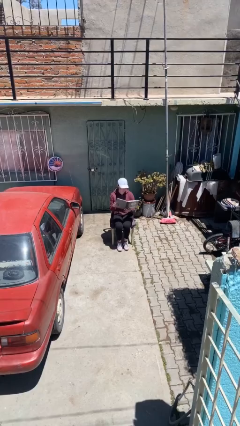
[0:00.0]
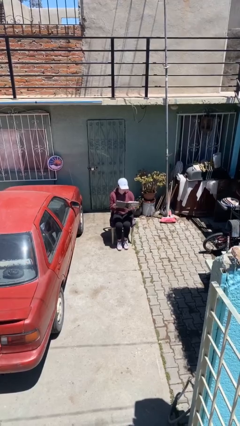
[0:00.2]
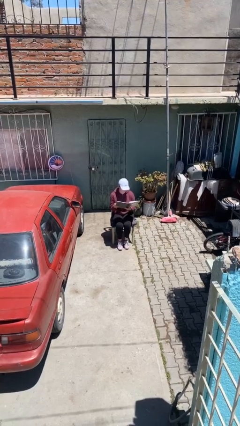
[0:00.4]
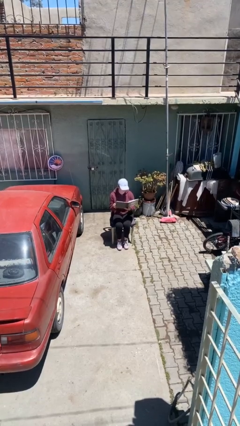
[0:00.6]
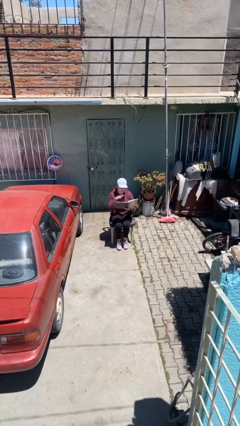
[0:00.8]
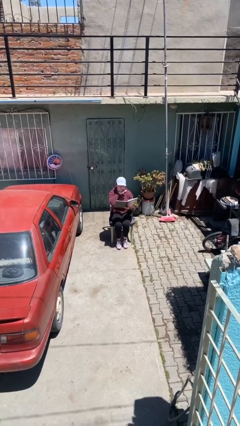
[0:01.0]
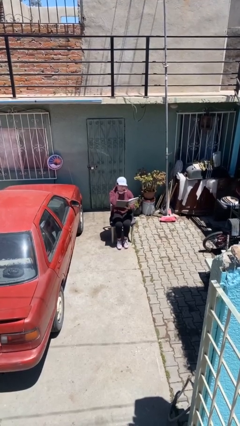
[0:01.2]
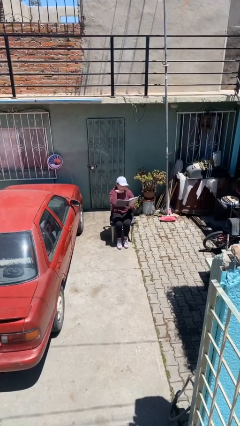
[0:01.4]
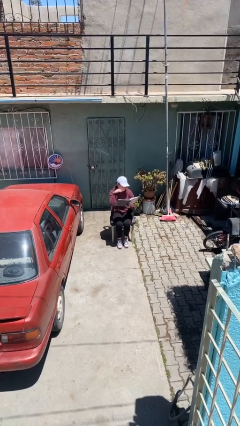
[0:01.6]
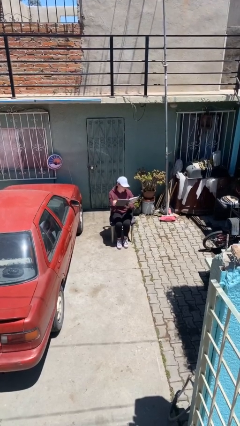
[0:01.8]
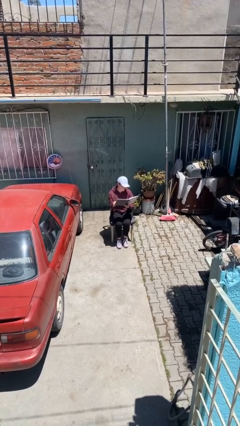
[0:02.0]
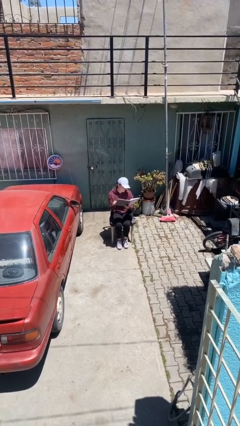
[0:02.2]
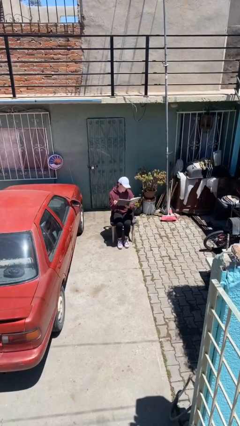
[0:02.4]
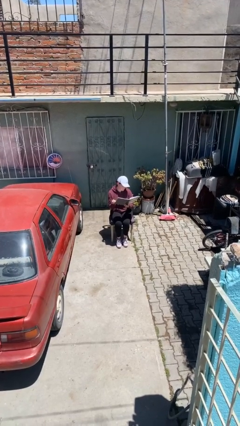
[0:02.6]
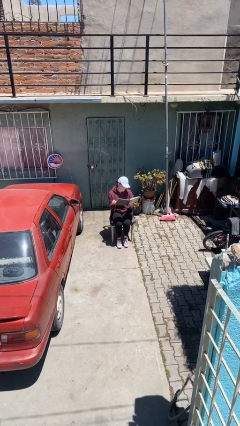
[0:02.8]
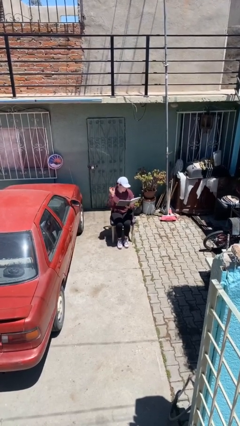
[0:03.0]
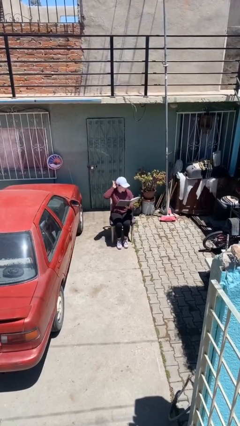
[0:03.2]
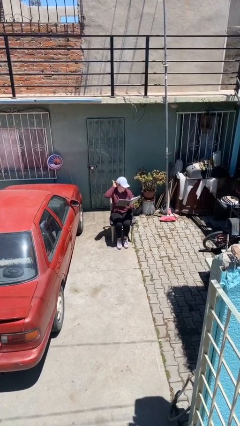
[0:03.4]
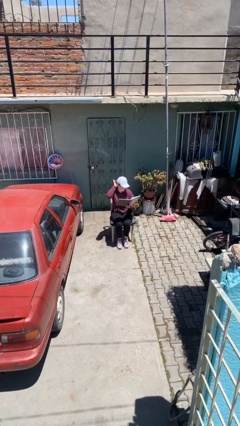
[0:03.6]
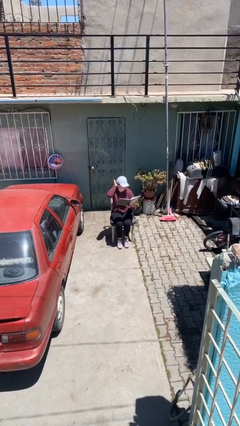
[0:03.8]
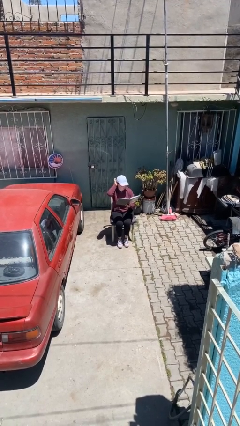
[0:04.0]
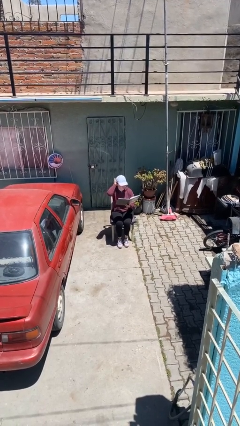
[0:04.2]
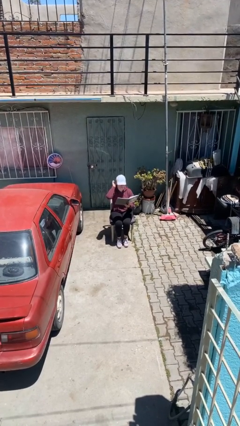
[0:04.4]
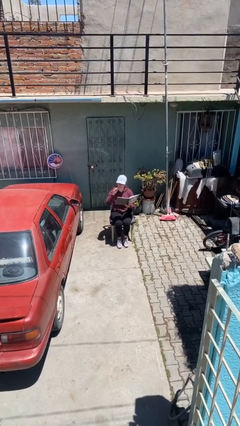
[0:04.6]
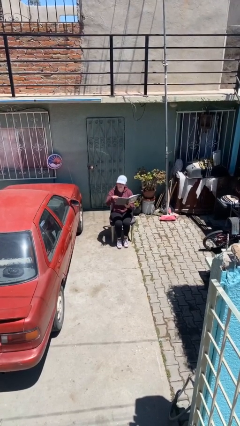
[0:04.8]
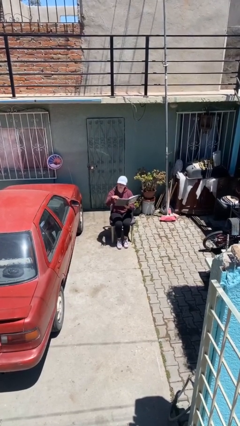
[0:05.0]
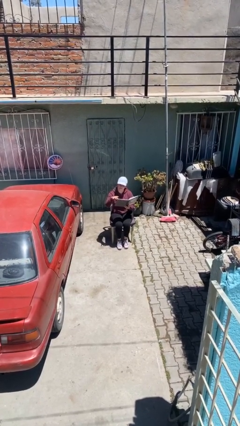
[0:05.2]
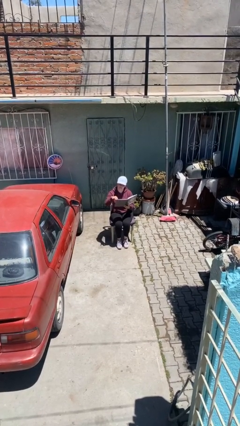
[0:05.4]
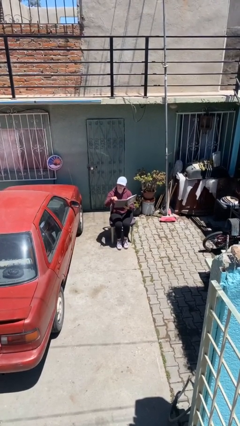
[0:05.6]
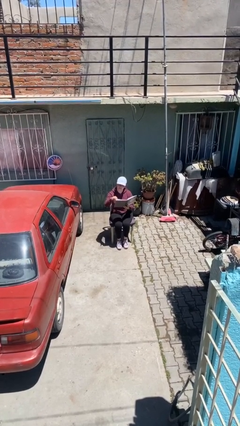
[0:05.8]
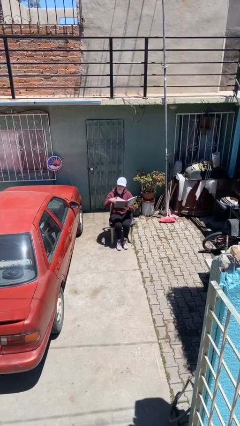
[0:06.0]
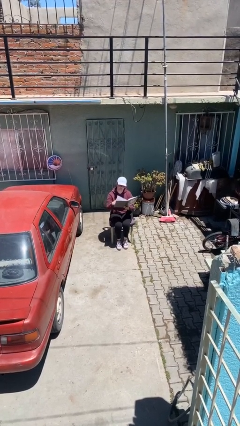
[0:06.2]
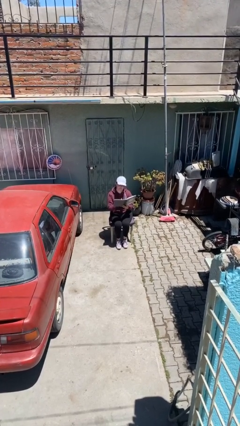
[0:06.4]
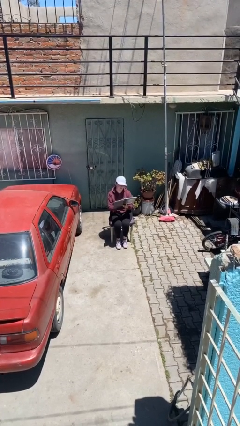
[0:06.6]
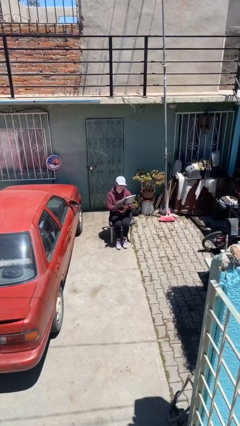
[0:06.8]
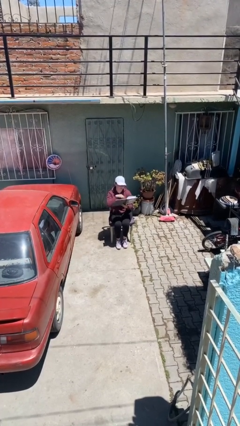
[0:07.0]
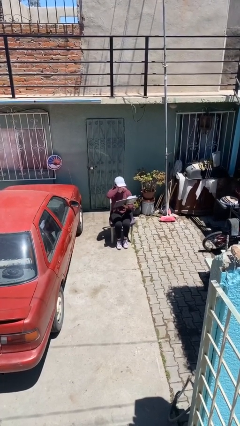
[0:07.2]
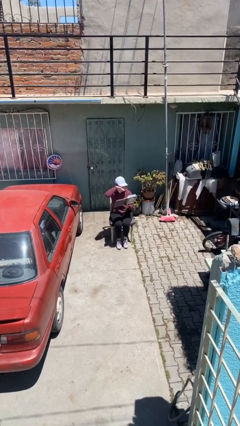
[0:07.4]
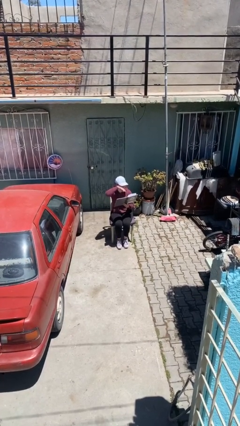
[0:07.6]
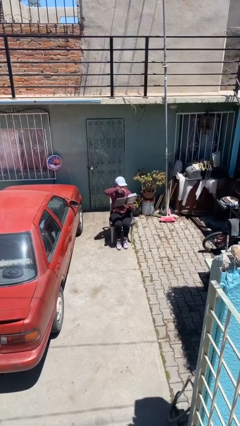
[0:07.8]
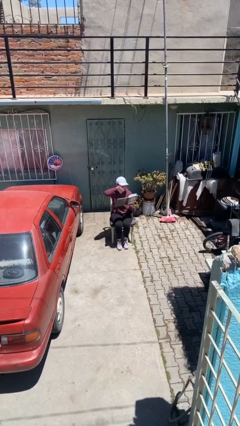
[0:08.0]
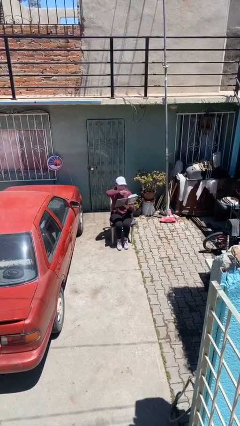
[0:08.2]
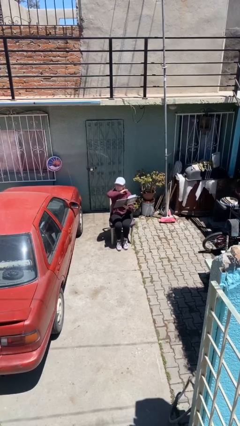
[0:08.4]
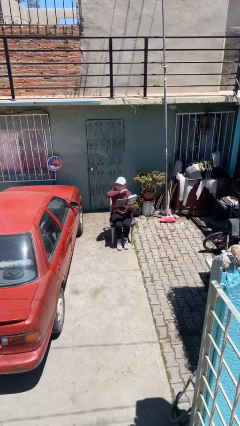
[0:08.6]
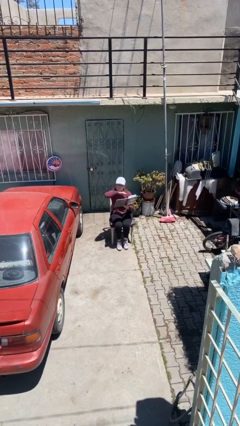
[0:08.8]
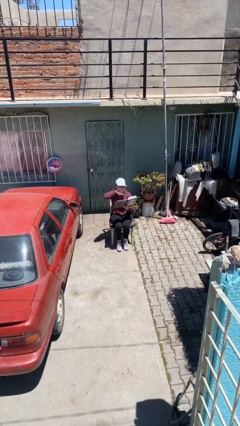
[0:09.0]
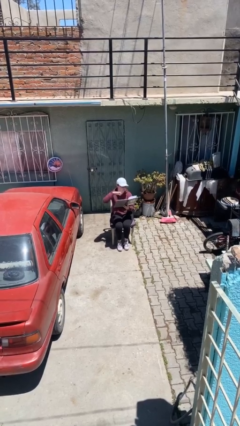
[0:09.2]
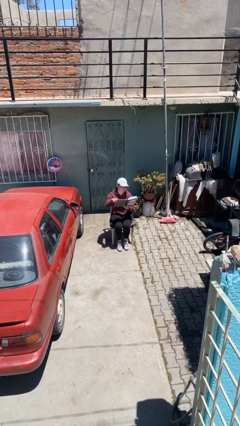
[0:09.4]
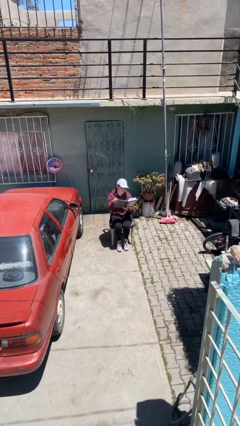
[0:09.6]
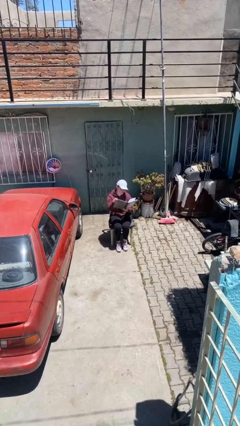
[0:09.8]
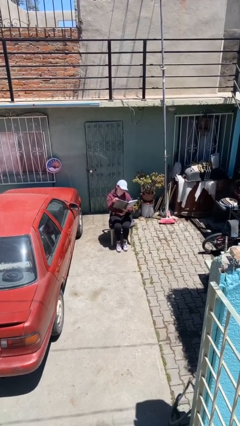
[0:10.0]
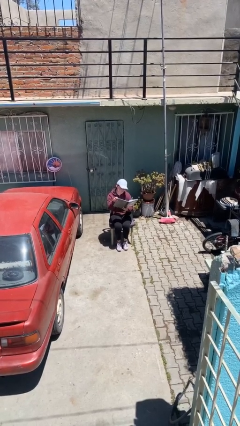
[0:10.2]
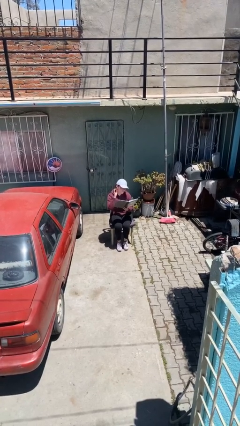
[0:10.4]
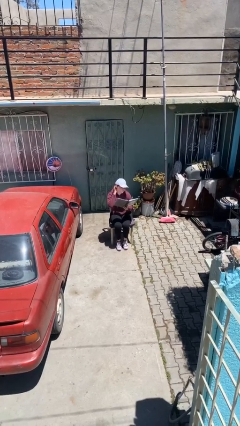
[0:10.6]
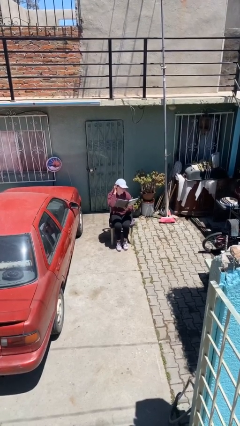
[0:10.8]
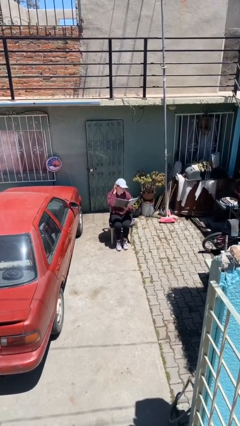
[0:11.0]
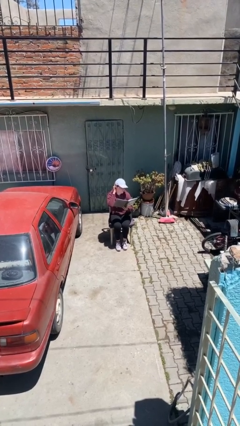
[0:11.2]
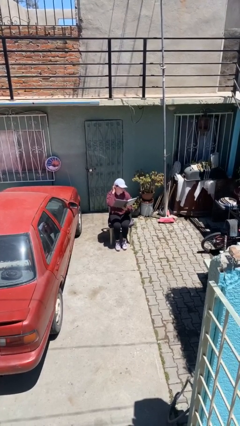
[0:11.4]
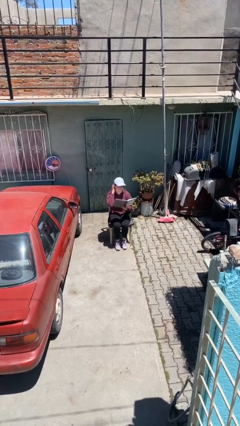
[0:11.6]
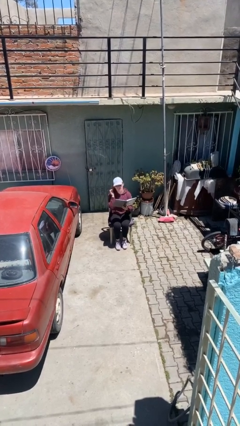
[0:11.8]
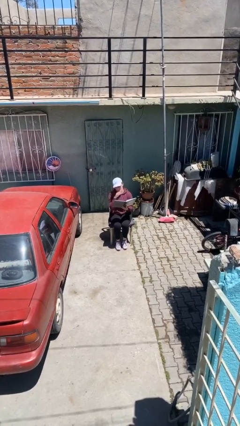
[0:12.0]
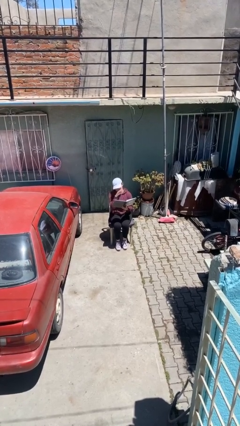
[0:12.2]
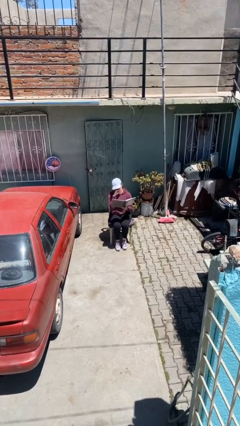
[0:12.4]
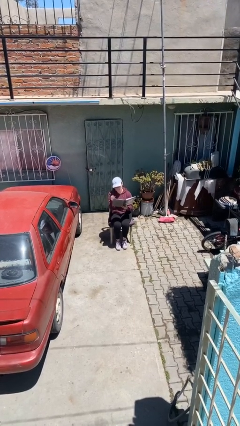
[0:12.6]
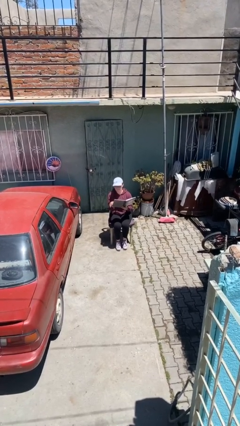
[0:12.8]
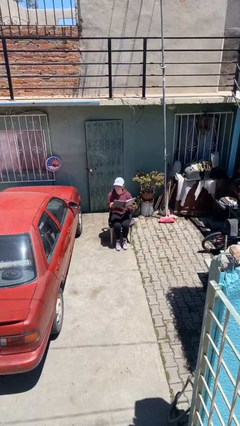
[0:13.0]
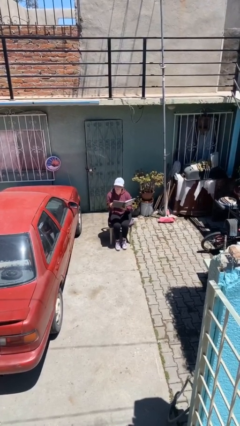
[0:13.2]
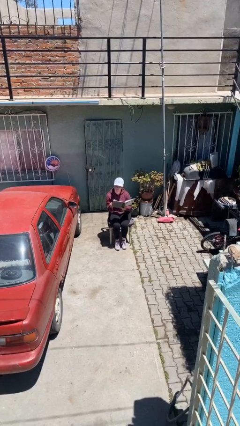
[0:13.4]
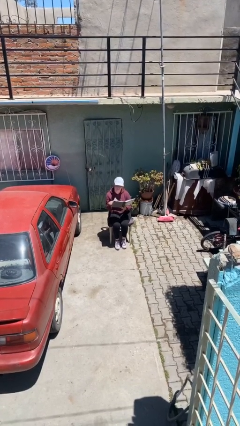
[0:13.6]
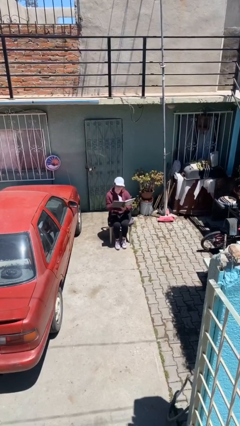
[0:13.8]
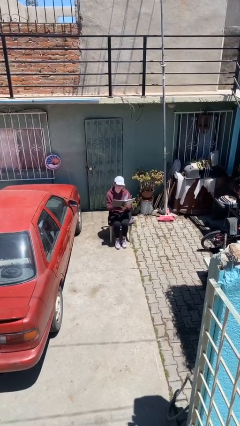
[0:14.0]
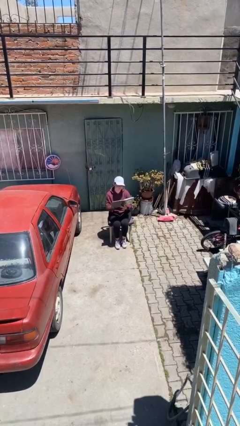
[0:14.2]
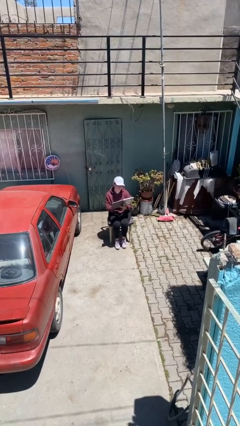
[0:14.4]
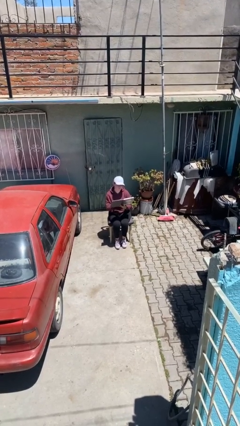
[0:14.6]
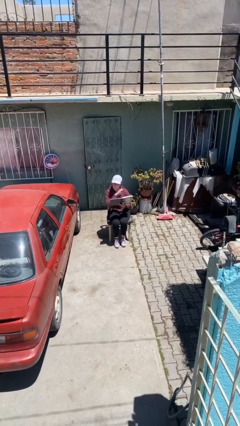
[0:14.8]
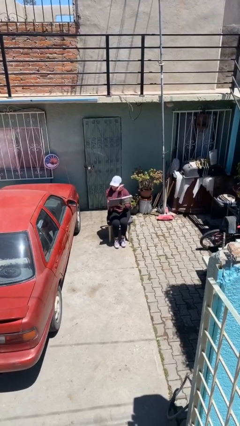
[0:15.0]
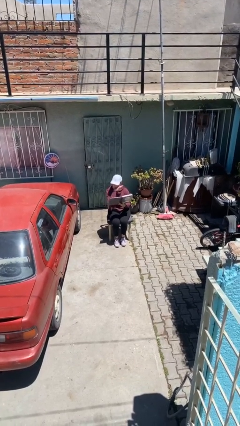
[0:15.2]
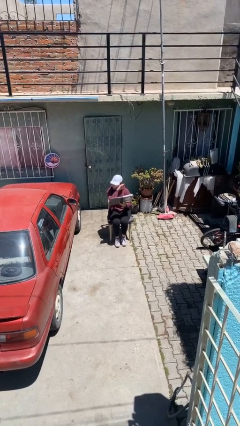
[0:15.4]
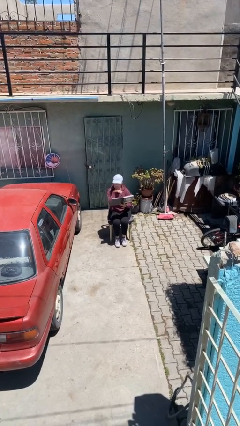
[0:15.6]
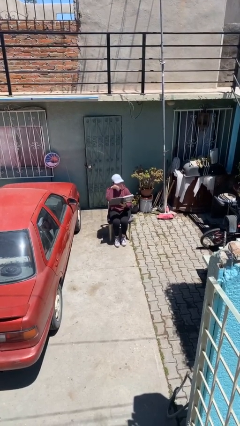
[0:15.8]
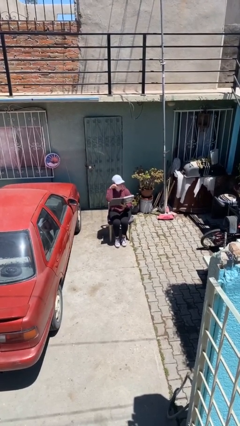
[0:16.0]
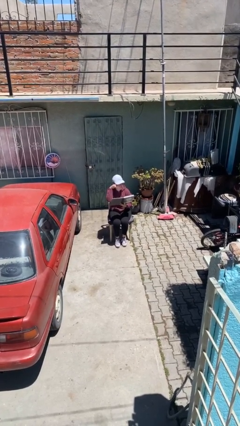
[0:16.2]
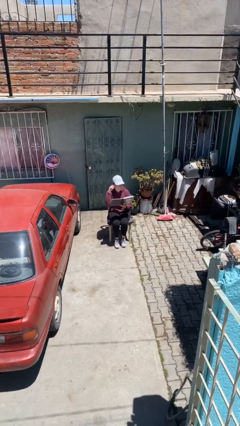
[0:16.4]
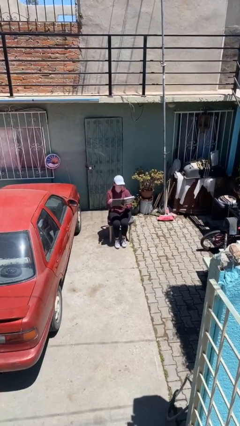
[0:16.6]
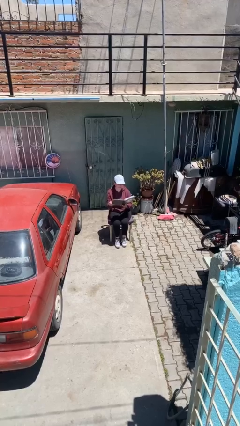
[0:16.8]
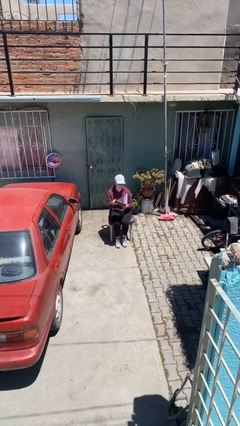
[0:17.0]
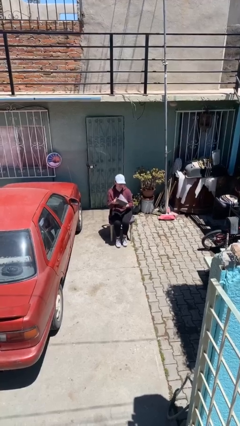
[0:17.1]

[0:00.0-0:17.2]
person reads document

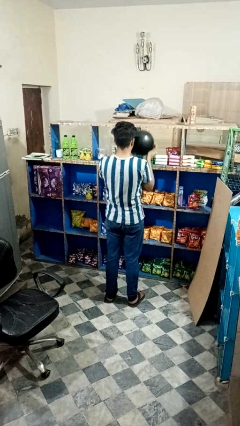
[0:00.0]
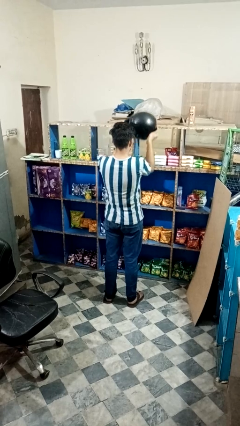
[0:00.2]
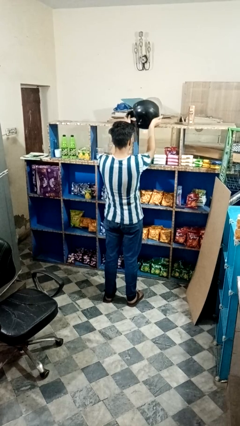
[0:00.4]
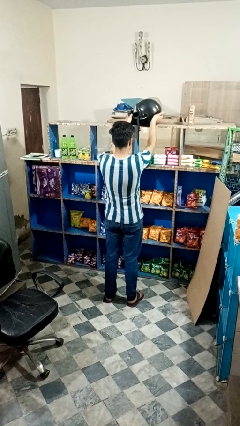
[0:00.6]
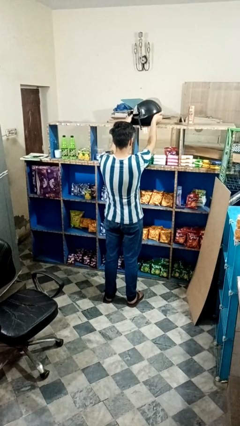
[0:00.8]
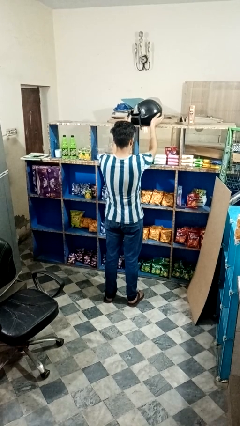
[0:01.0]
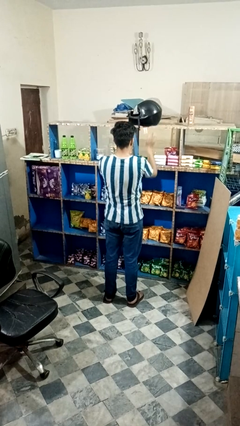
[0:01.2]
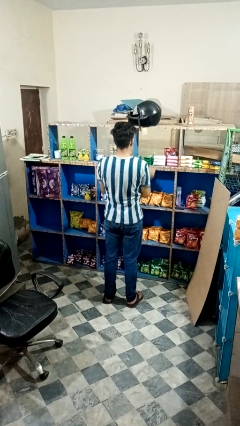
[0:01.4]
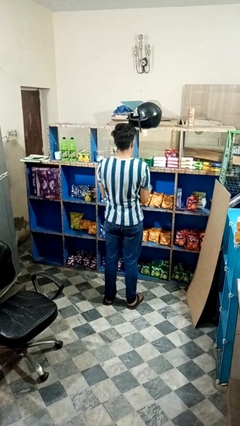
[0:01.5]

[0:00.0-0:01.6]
person puts down object on countertop
